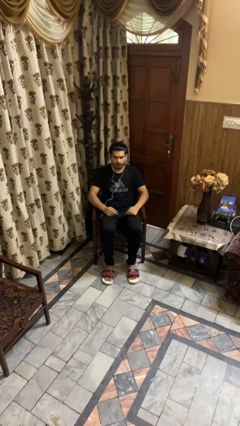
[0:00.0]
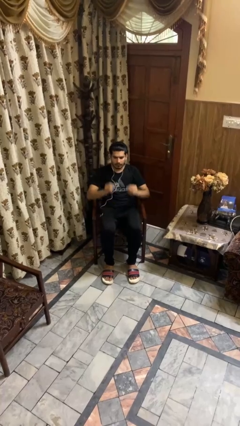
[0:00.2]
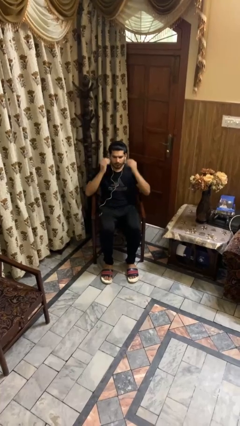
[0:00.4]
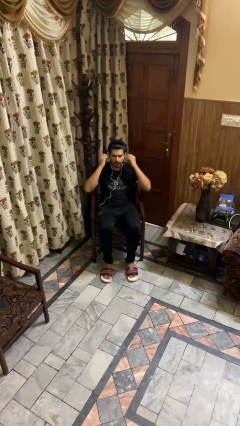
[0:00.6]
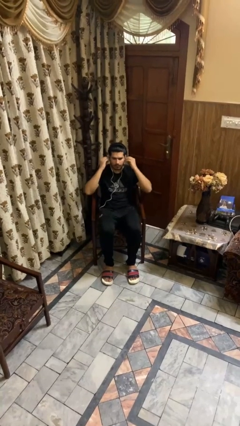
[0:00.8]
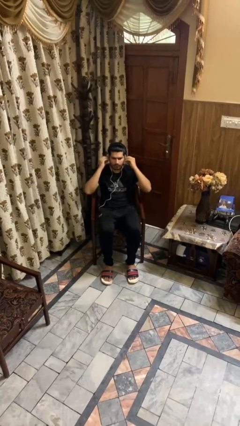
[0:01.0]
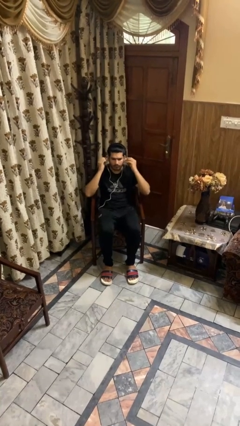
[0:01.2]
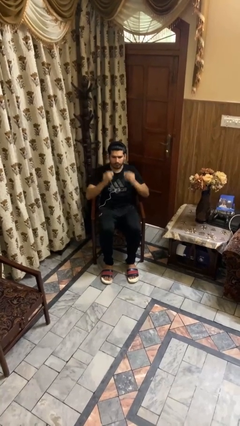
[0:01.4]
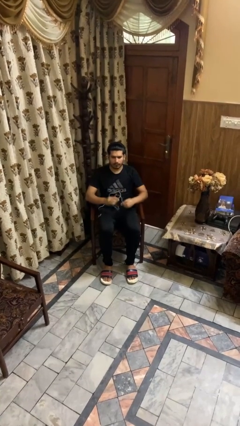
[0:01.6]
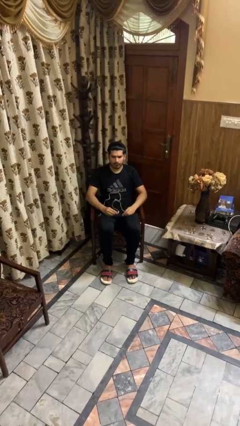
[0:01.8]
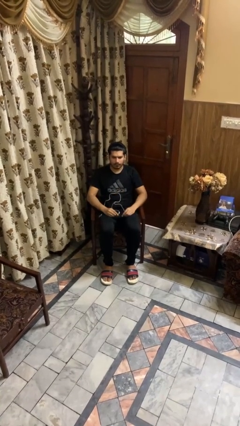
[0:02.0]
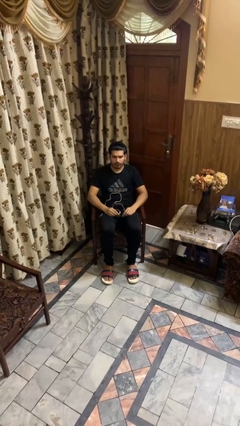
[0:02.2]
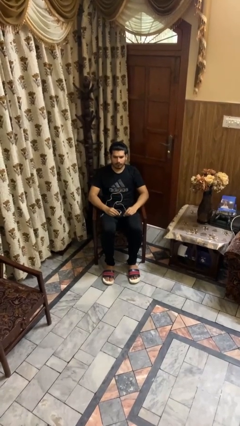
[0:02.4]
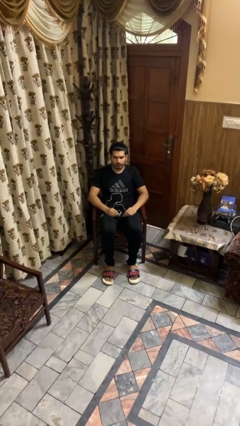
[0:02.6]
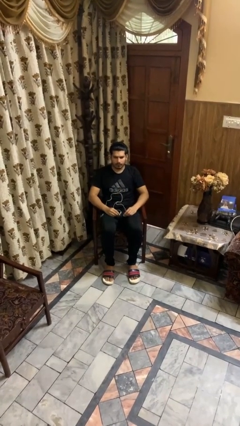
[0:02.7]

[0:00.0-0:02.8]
person takes off headphones

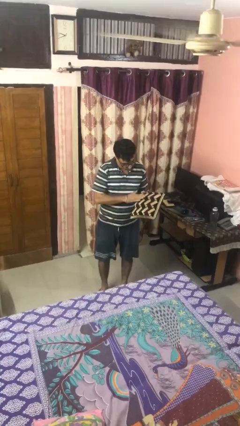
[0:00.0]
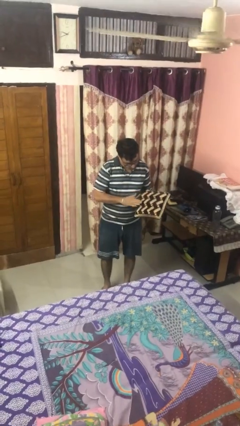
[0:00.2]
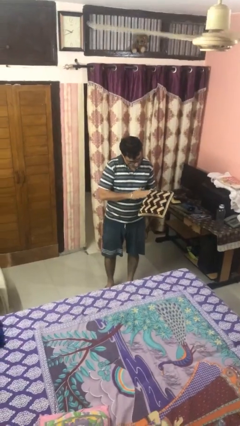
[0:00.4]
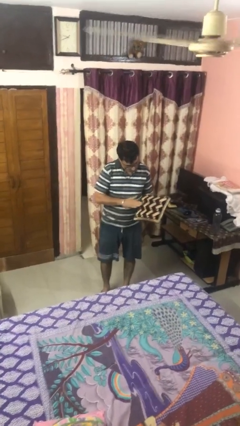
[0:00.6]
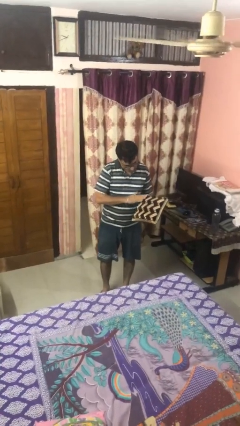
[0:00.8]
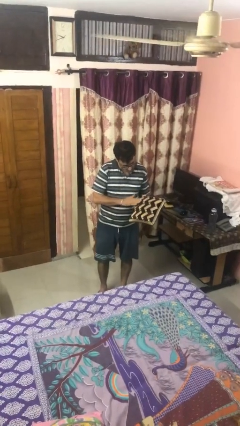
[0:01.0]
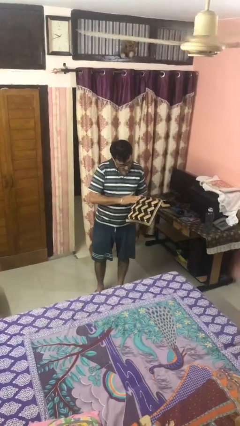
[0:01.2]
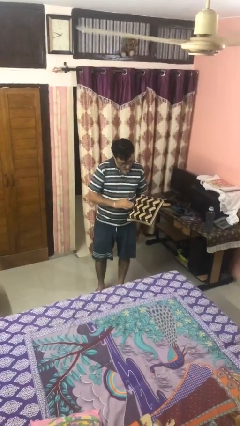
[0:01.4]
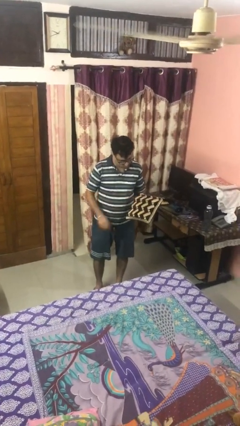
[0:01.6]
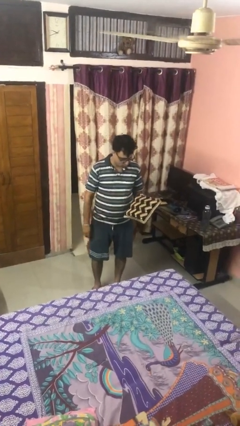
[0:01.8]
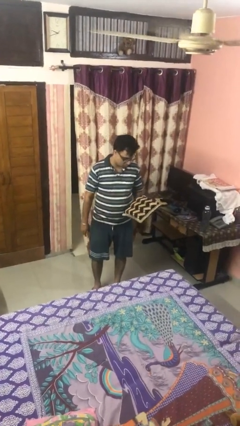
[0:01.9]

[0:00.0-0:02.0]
person waves hand over object

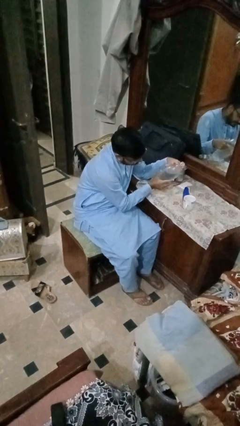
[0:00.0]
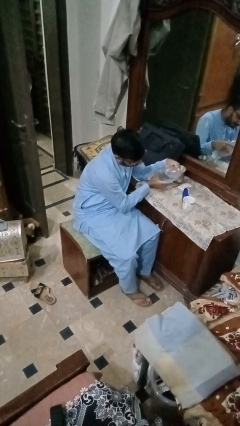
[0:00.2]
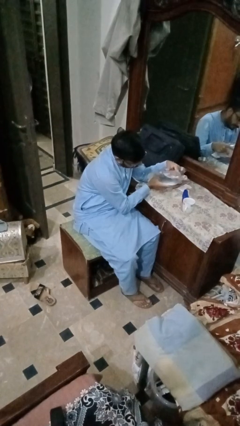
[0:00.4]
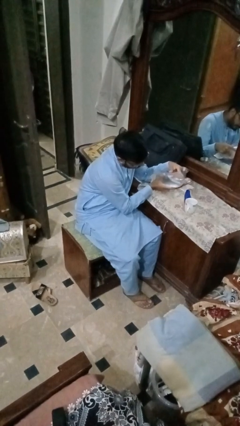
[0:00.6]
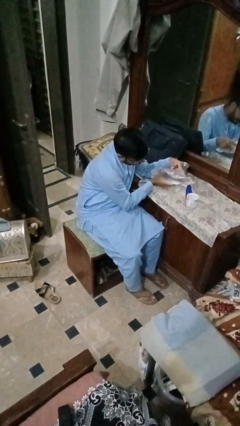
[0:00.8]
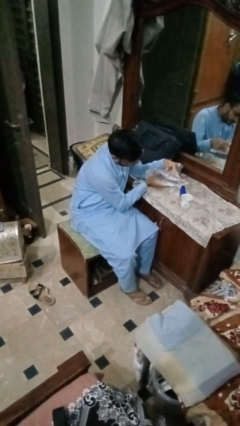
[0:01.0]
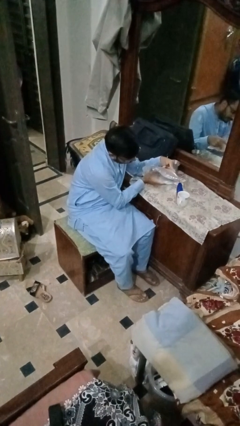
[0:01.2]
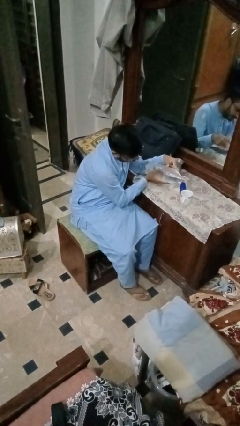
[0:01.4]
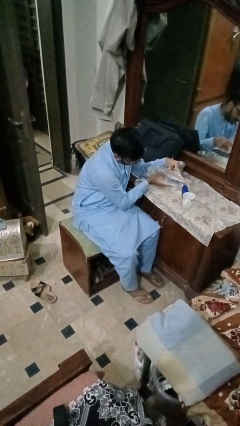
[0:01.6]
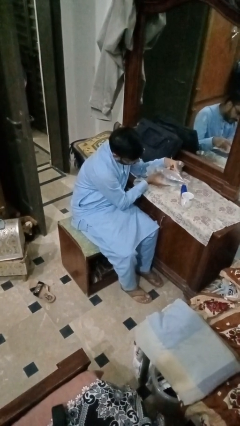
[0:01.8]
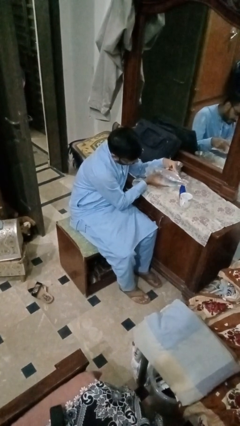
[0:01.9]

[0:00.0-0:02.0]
person pours liquid into cup

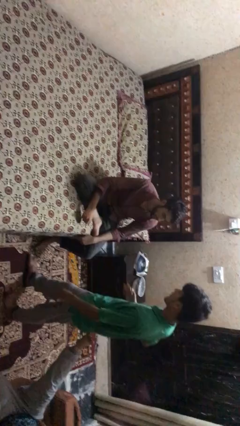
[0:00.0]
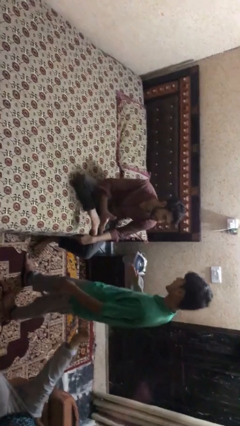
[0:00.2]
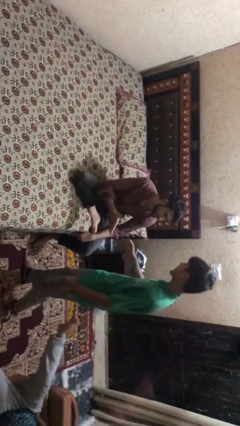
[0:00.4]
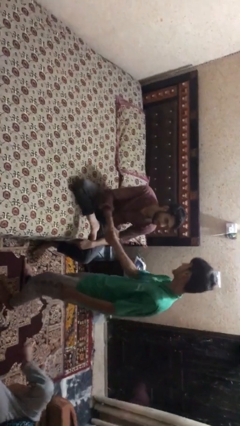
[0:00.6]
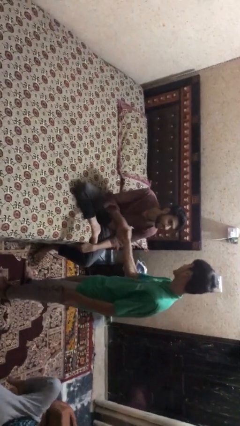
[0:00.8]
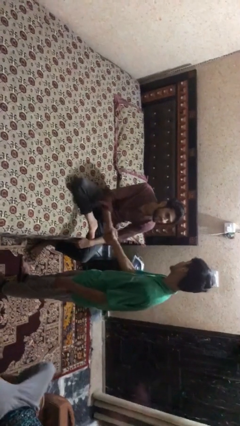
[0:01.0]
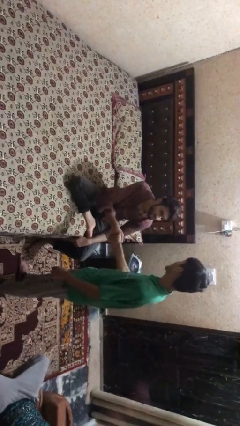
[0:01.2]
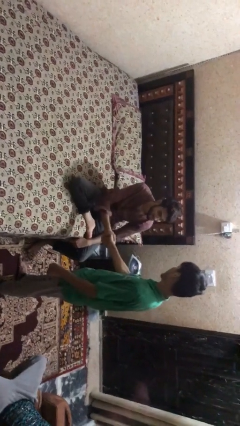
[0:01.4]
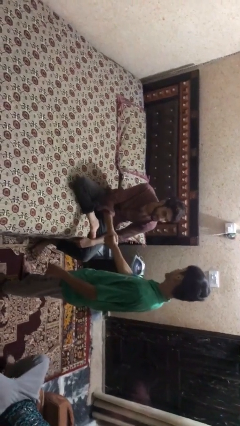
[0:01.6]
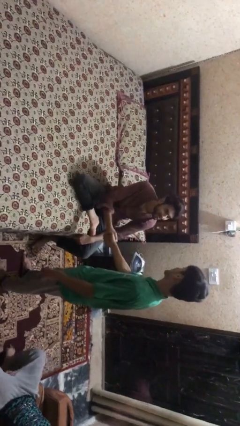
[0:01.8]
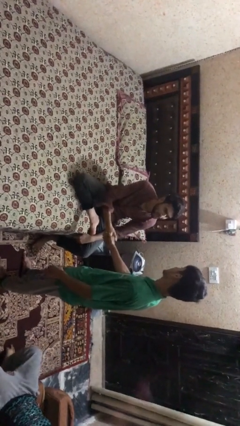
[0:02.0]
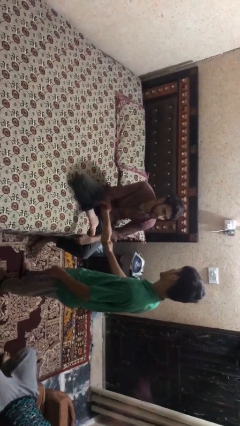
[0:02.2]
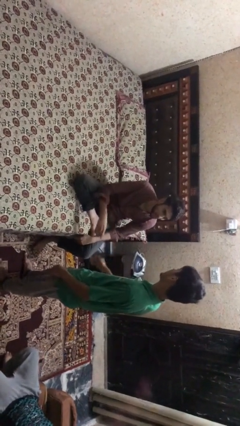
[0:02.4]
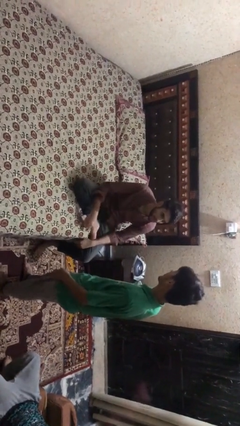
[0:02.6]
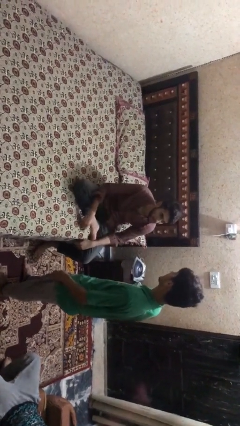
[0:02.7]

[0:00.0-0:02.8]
person shakes hand

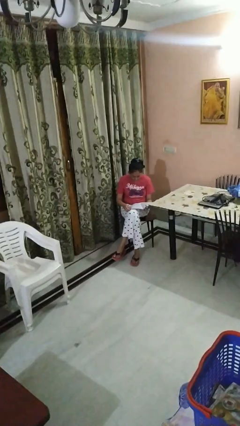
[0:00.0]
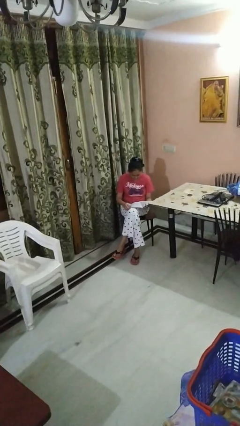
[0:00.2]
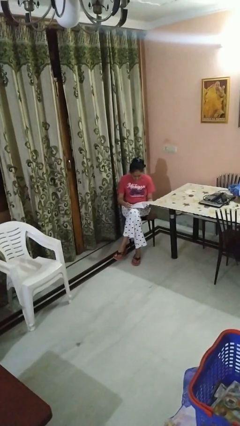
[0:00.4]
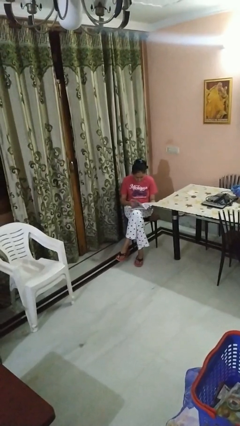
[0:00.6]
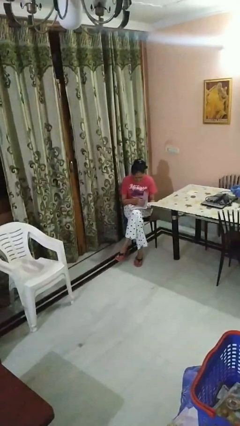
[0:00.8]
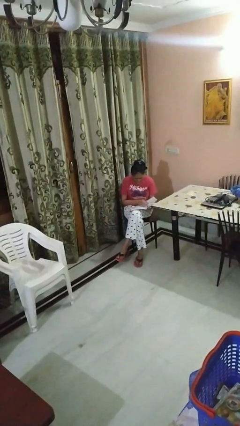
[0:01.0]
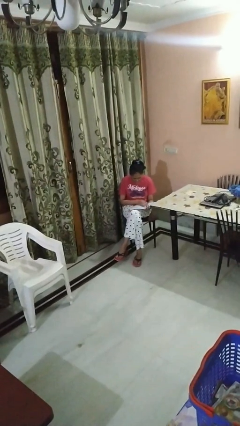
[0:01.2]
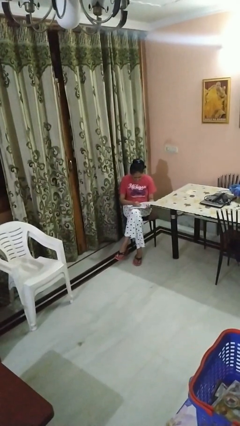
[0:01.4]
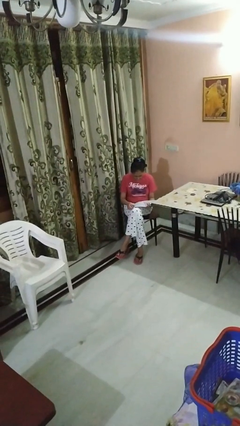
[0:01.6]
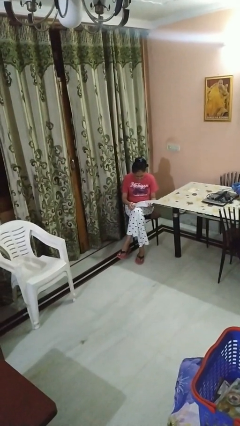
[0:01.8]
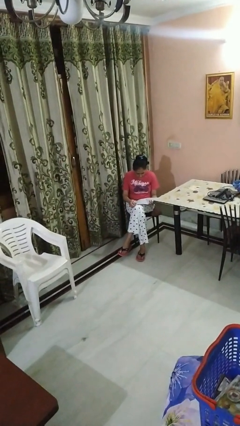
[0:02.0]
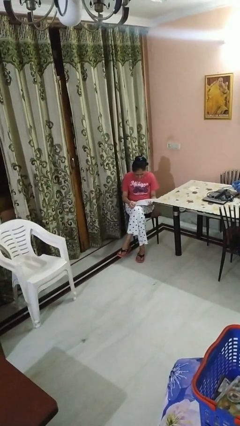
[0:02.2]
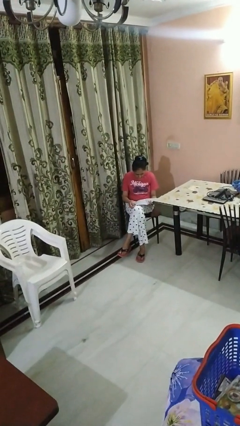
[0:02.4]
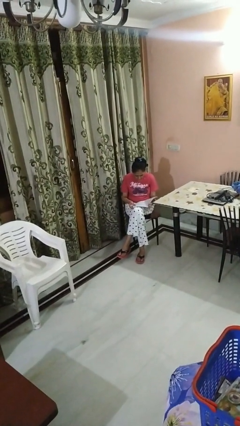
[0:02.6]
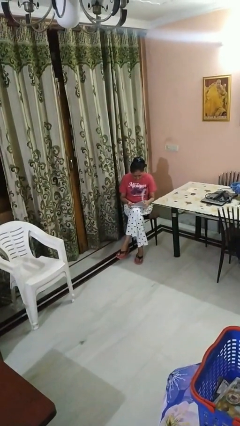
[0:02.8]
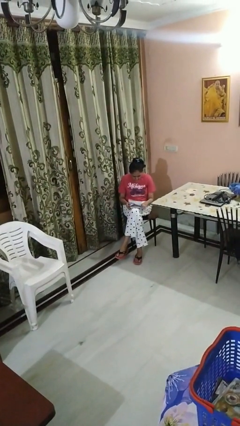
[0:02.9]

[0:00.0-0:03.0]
person reads magazine

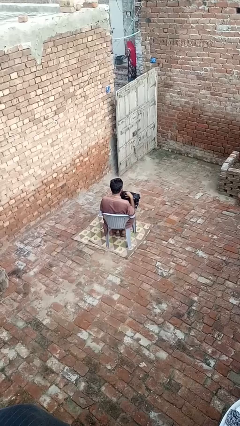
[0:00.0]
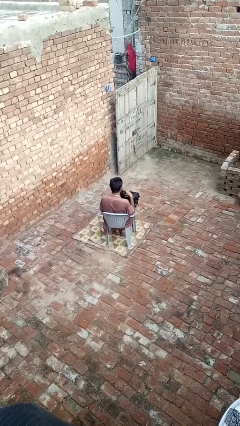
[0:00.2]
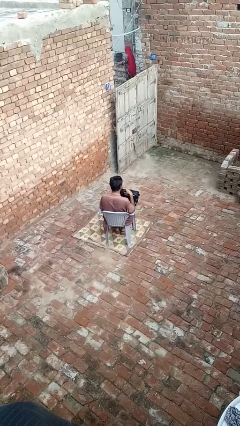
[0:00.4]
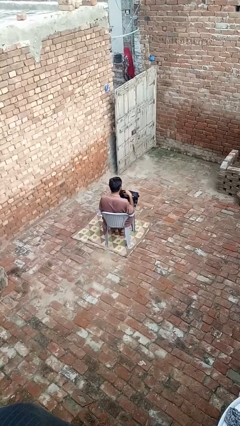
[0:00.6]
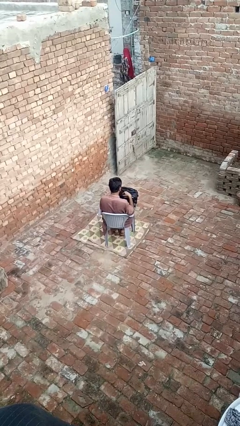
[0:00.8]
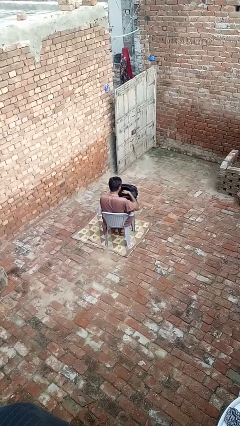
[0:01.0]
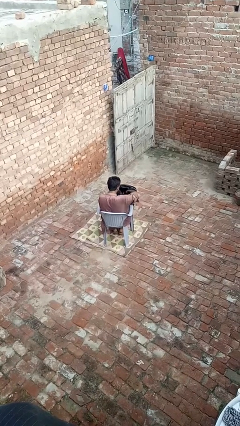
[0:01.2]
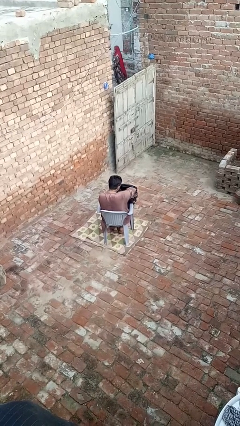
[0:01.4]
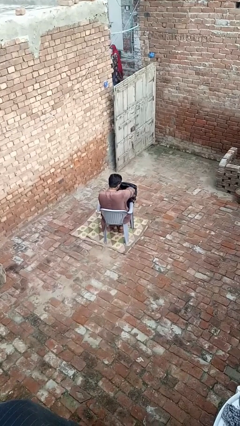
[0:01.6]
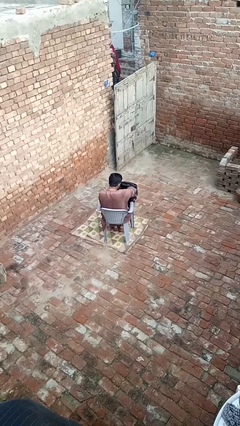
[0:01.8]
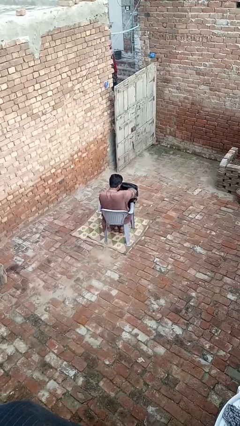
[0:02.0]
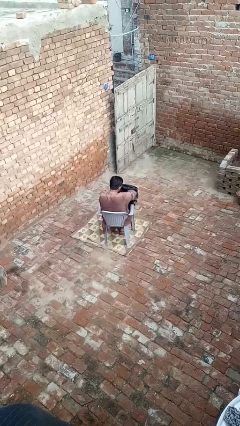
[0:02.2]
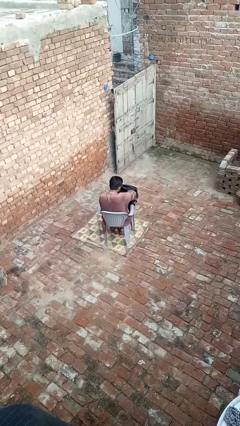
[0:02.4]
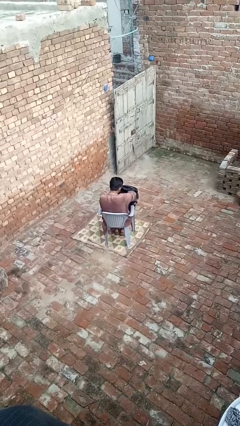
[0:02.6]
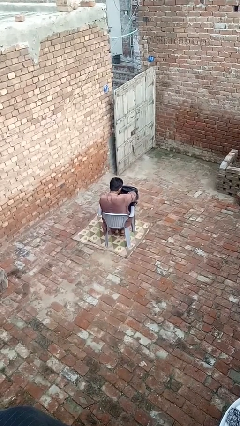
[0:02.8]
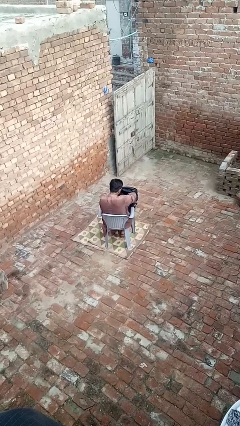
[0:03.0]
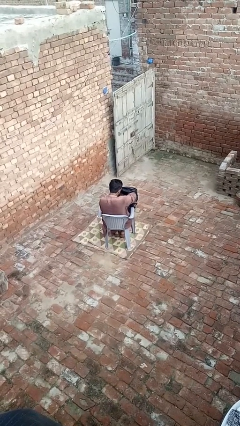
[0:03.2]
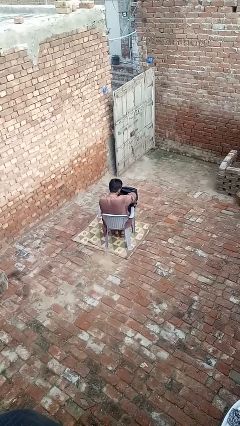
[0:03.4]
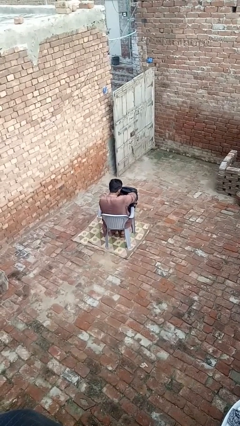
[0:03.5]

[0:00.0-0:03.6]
person searches in backpack

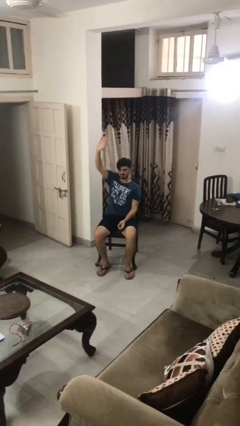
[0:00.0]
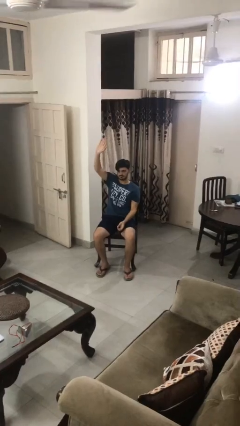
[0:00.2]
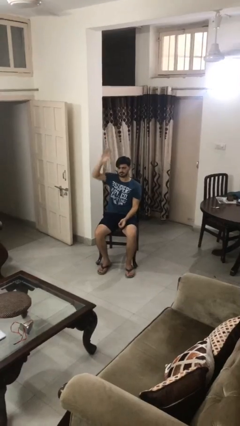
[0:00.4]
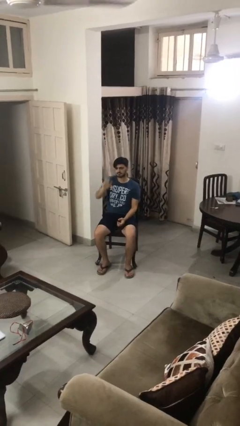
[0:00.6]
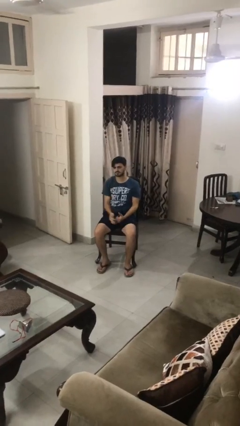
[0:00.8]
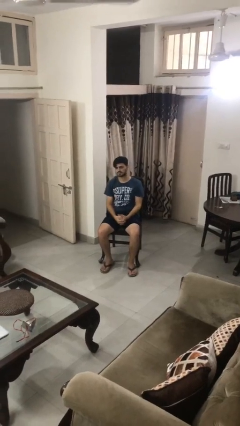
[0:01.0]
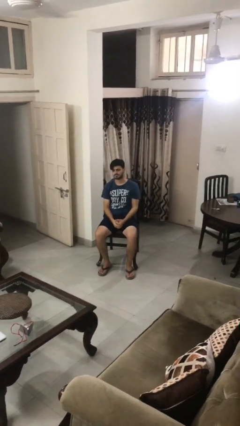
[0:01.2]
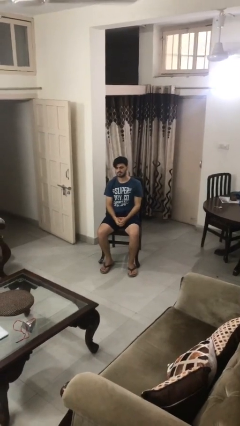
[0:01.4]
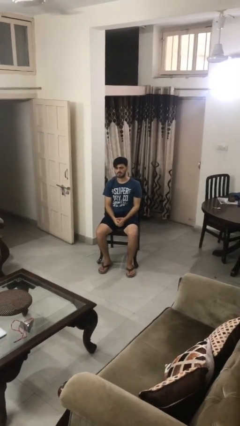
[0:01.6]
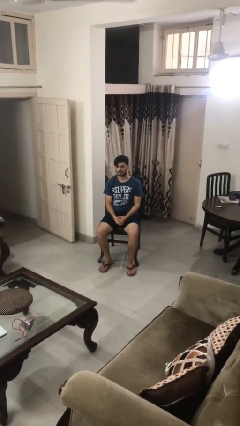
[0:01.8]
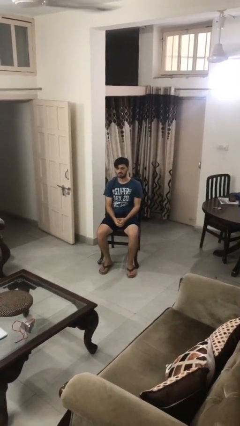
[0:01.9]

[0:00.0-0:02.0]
person gestures lower hand
